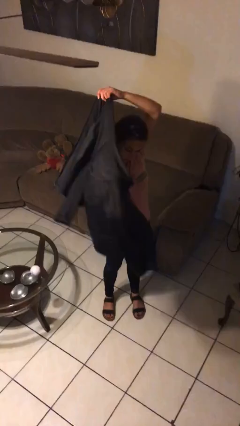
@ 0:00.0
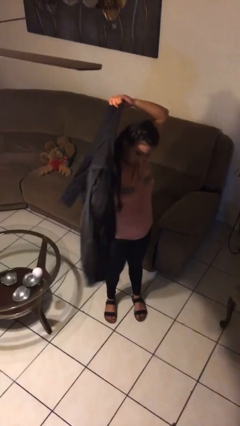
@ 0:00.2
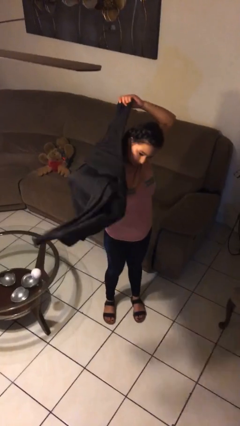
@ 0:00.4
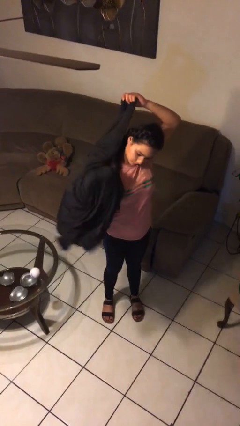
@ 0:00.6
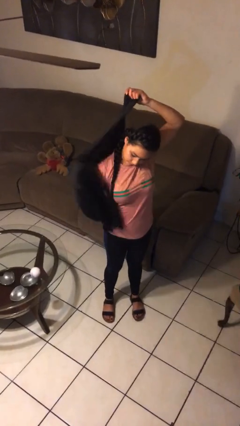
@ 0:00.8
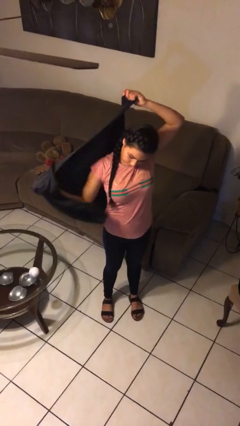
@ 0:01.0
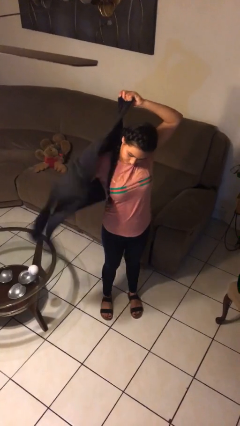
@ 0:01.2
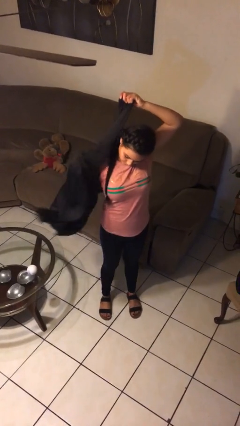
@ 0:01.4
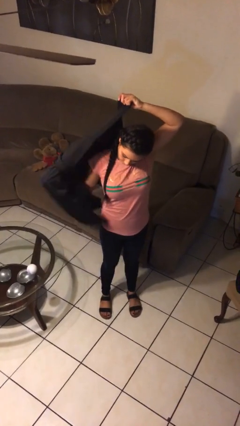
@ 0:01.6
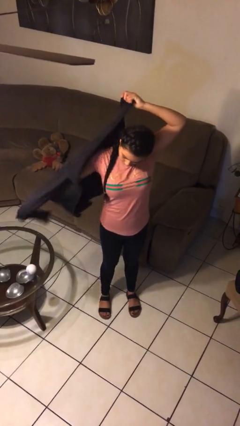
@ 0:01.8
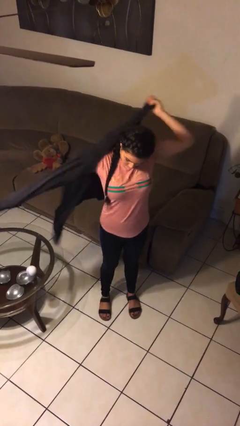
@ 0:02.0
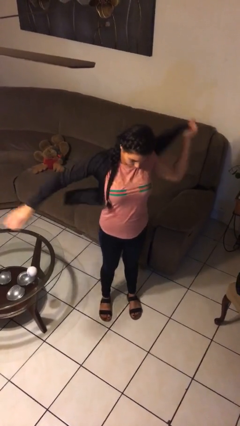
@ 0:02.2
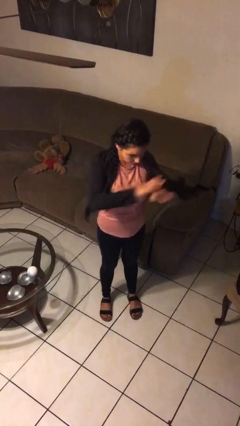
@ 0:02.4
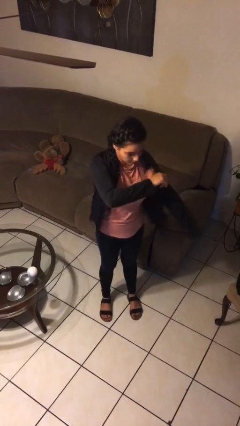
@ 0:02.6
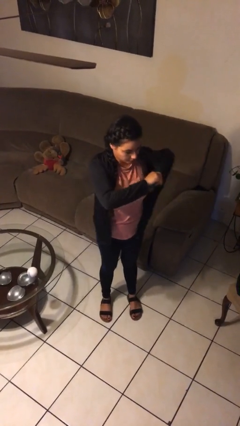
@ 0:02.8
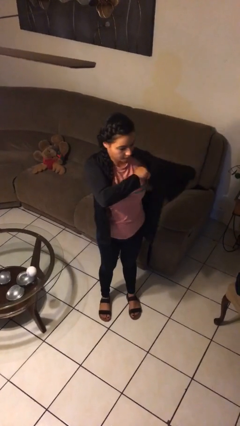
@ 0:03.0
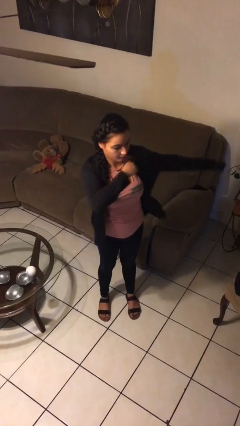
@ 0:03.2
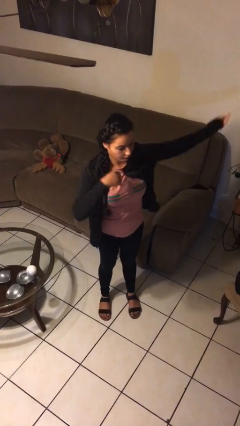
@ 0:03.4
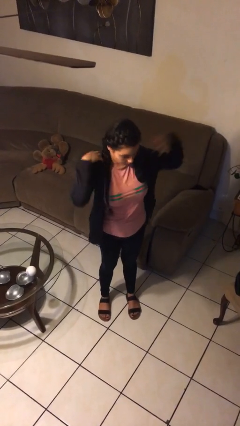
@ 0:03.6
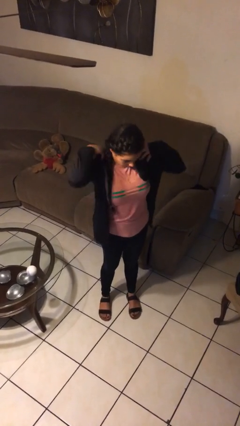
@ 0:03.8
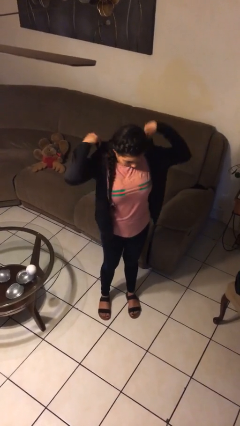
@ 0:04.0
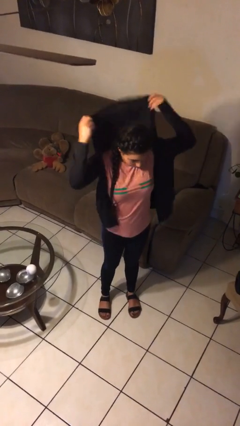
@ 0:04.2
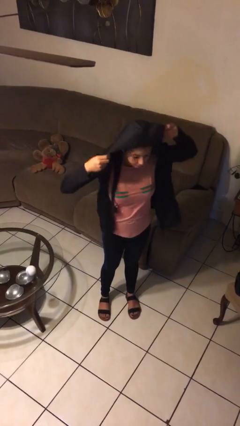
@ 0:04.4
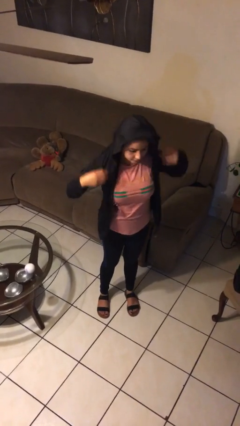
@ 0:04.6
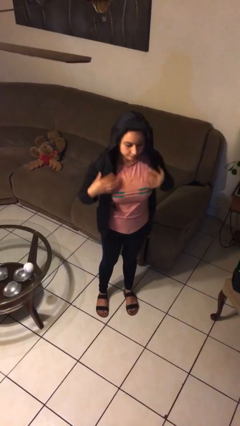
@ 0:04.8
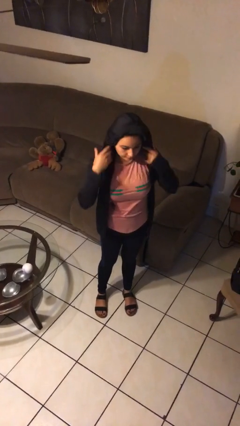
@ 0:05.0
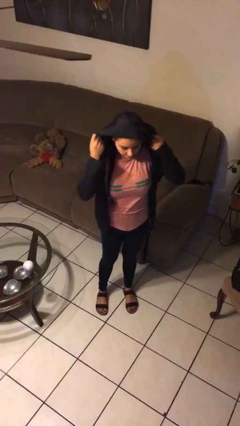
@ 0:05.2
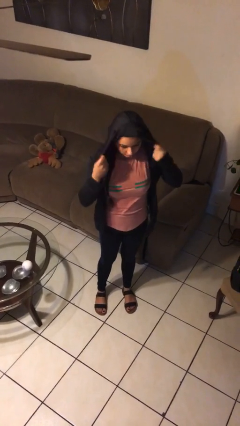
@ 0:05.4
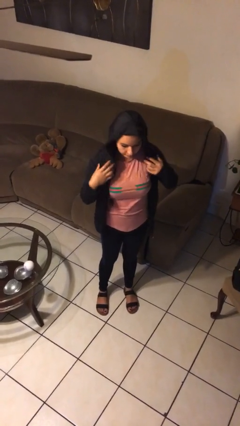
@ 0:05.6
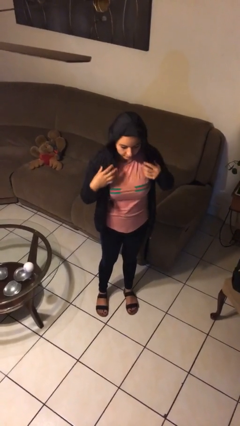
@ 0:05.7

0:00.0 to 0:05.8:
person puts on hoodie

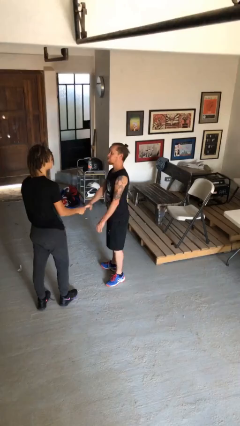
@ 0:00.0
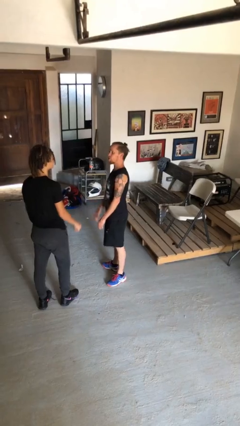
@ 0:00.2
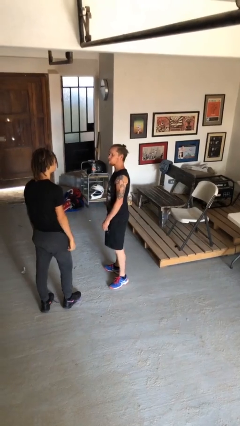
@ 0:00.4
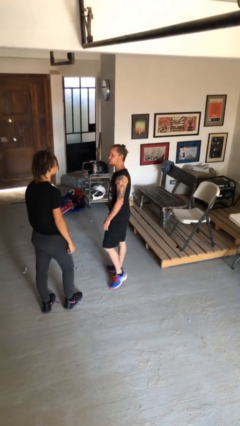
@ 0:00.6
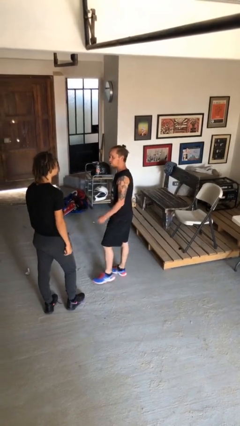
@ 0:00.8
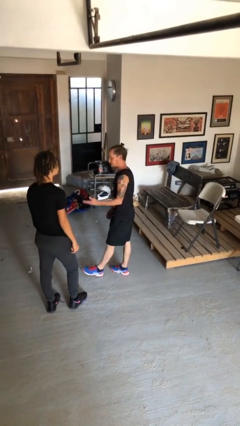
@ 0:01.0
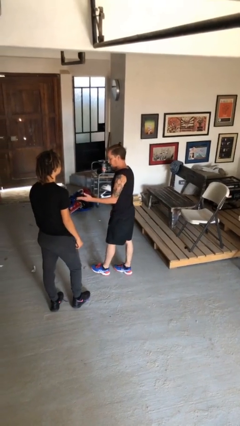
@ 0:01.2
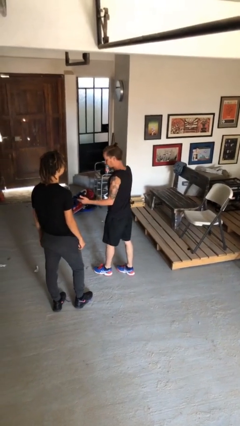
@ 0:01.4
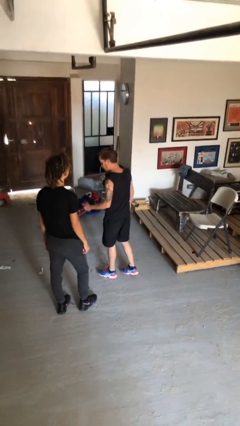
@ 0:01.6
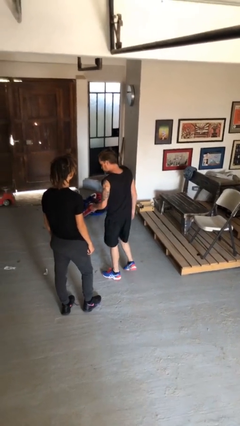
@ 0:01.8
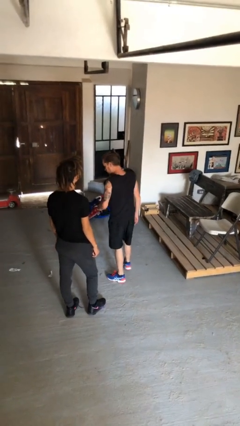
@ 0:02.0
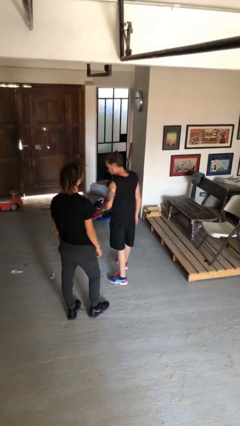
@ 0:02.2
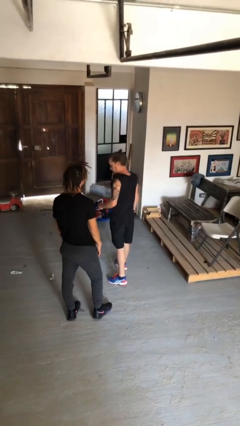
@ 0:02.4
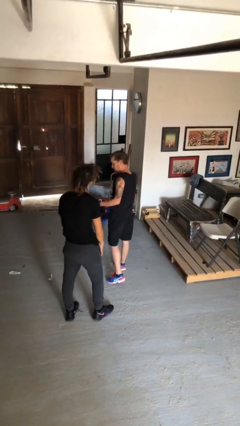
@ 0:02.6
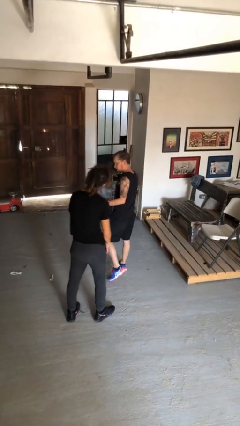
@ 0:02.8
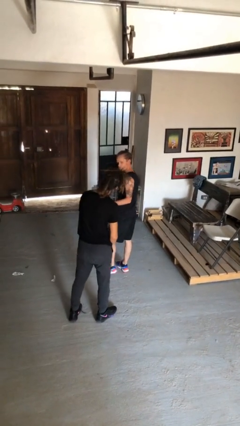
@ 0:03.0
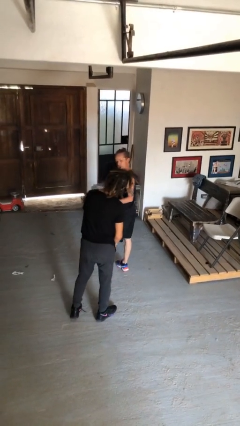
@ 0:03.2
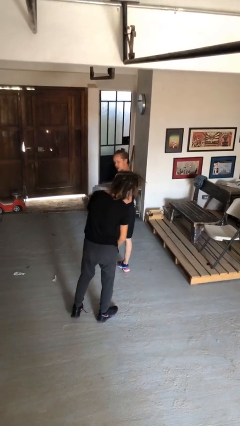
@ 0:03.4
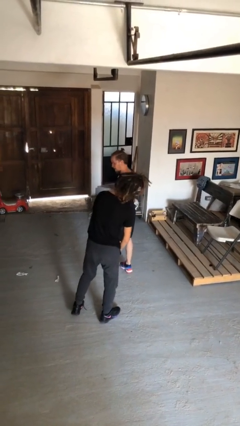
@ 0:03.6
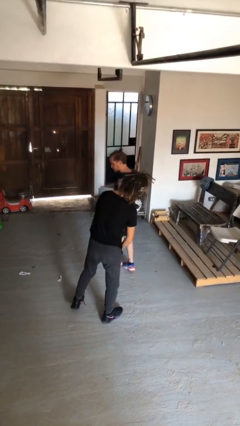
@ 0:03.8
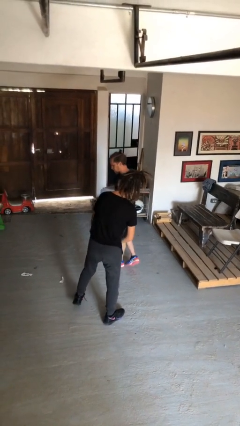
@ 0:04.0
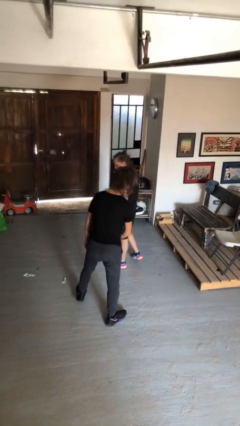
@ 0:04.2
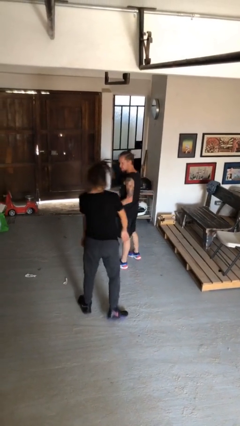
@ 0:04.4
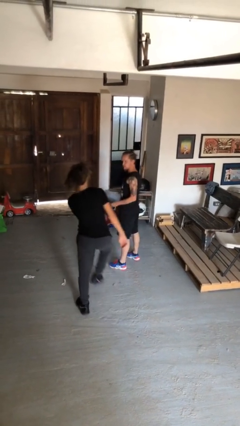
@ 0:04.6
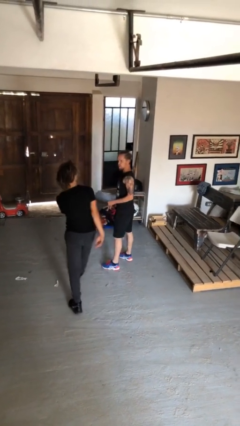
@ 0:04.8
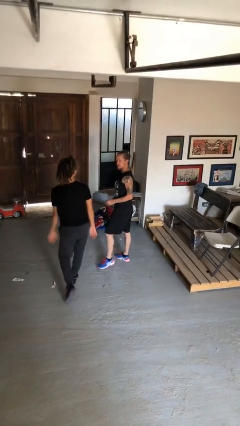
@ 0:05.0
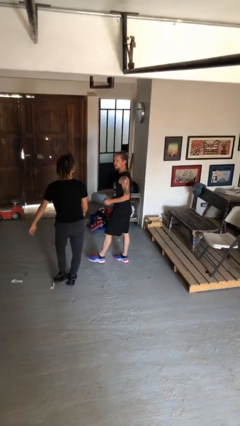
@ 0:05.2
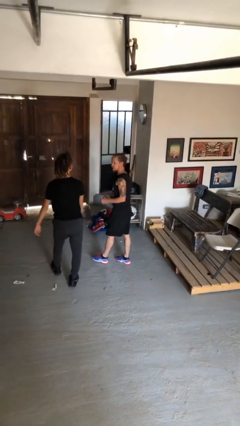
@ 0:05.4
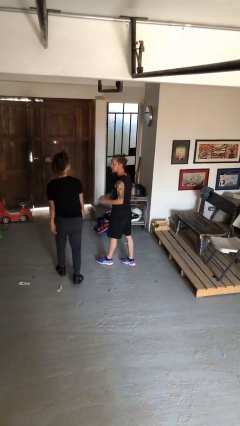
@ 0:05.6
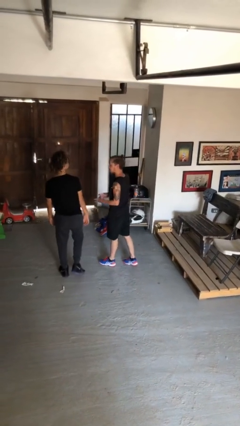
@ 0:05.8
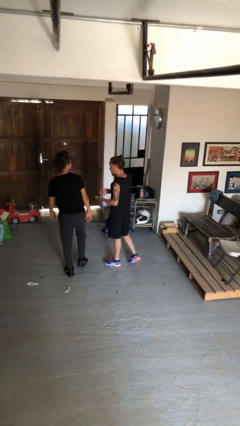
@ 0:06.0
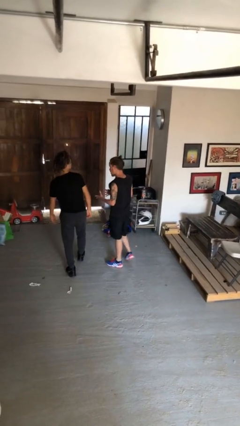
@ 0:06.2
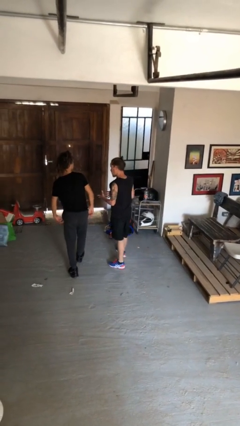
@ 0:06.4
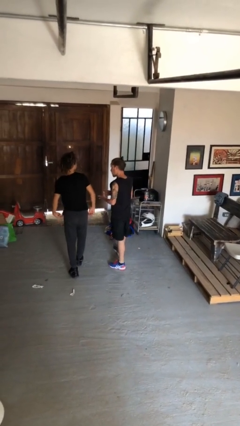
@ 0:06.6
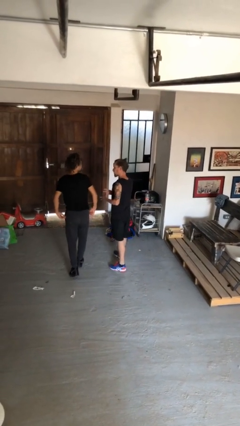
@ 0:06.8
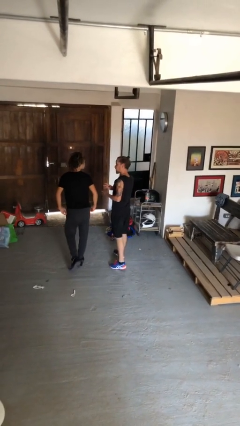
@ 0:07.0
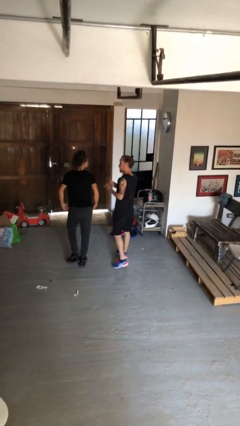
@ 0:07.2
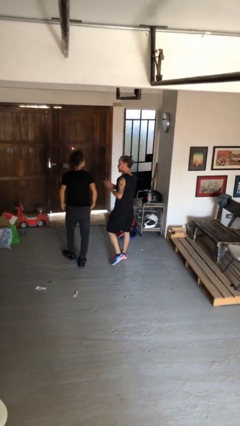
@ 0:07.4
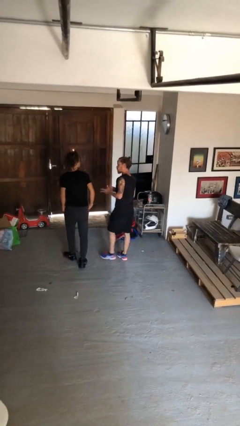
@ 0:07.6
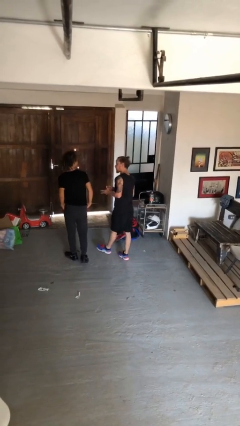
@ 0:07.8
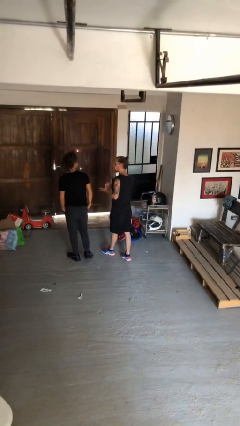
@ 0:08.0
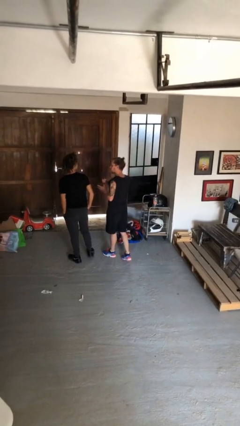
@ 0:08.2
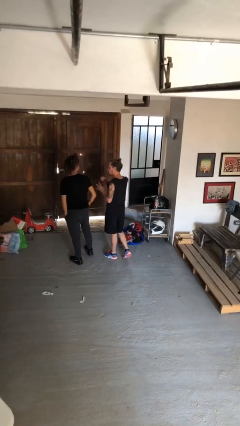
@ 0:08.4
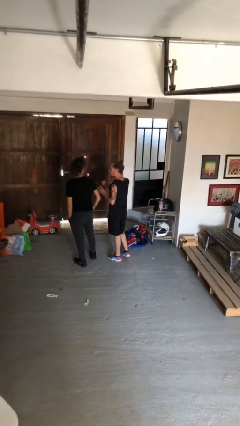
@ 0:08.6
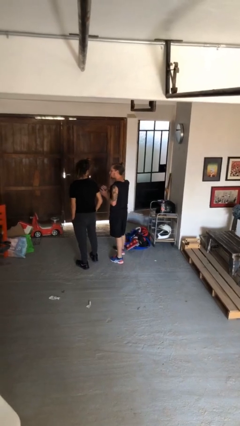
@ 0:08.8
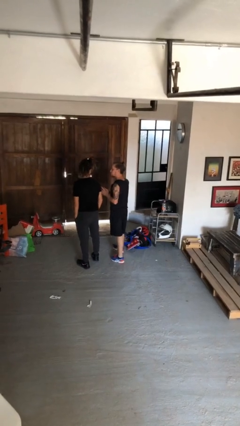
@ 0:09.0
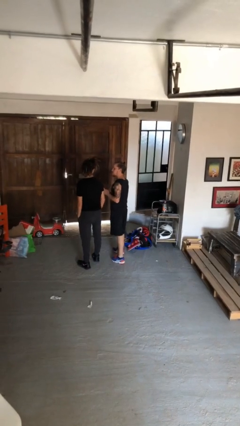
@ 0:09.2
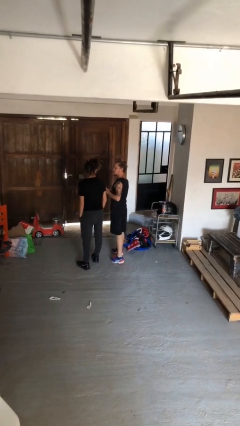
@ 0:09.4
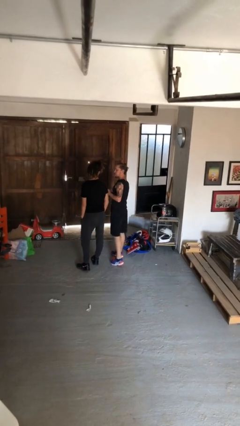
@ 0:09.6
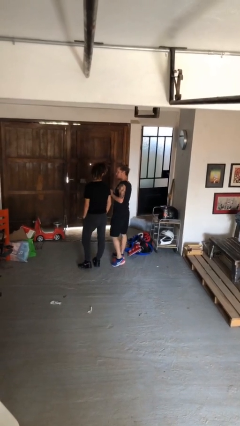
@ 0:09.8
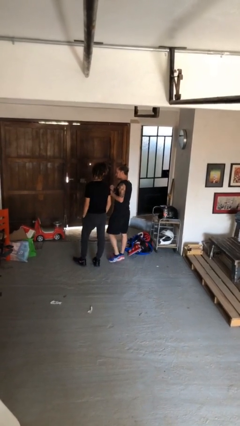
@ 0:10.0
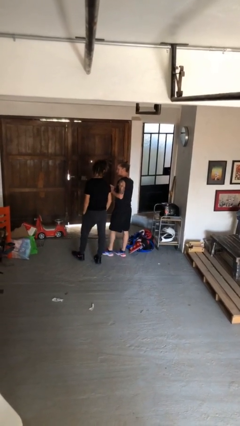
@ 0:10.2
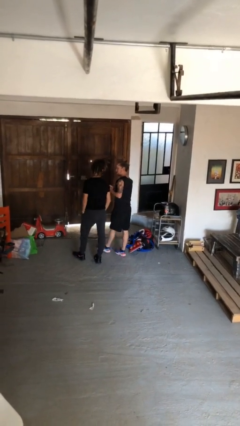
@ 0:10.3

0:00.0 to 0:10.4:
person talks to person

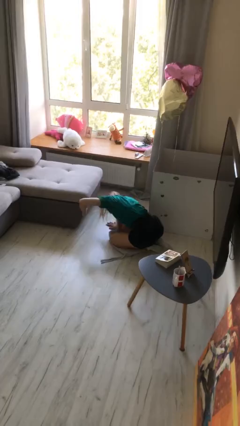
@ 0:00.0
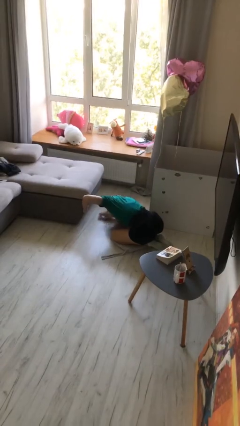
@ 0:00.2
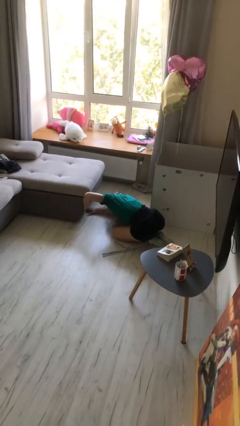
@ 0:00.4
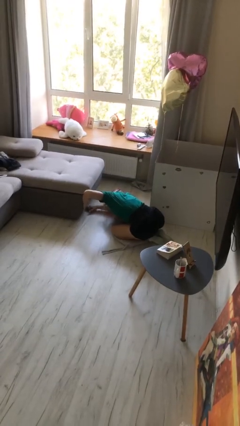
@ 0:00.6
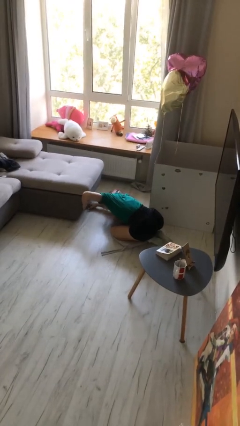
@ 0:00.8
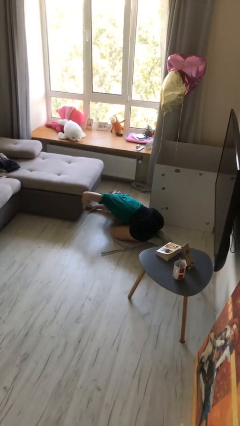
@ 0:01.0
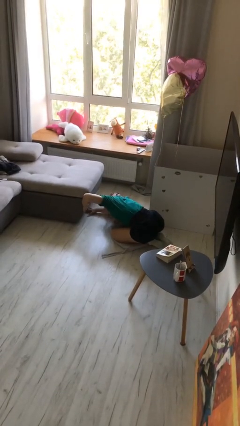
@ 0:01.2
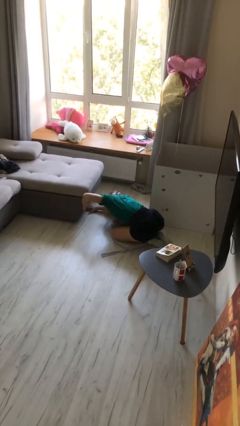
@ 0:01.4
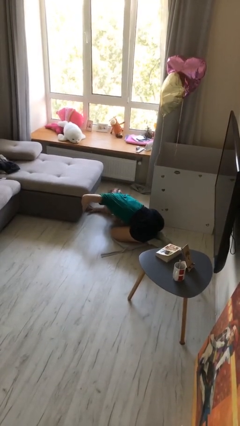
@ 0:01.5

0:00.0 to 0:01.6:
person searches under bed
